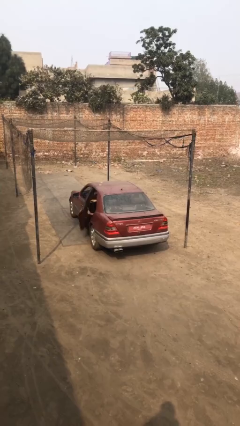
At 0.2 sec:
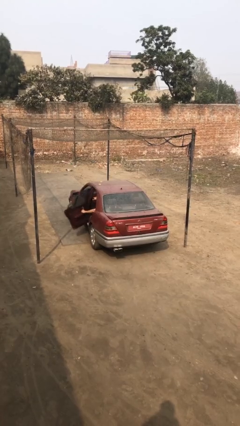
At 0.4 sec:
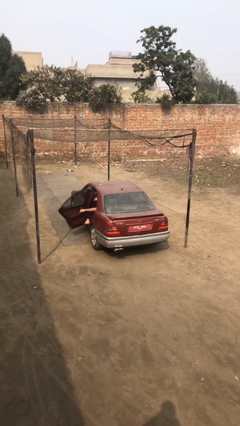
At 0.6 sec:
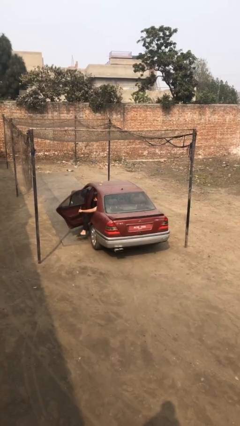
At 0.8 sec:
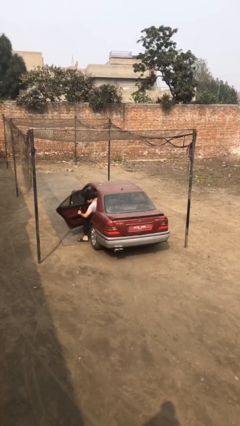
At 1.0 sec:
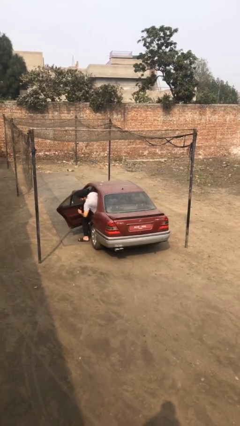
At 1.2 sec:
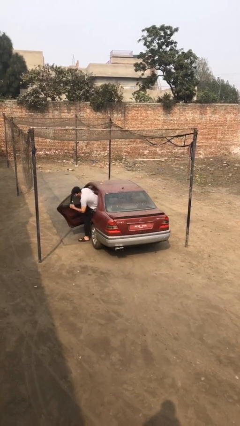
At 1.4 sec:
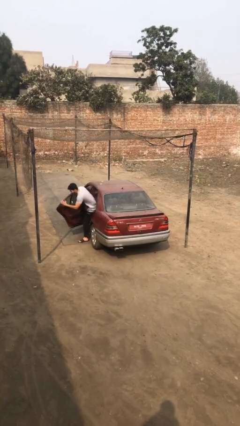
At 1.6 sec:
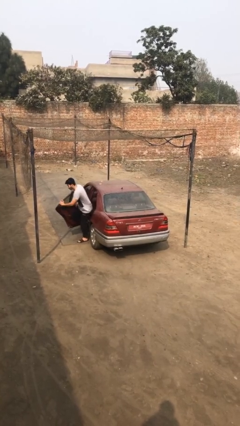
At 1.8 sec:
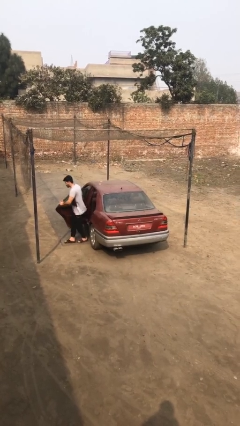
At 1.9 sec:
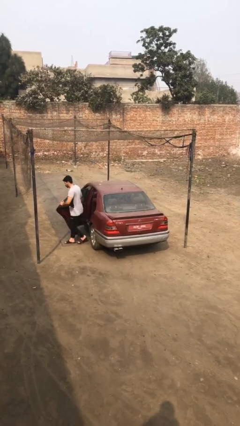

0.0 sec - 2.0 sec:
car drops off person

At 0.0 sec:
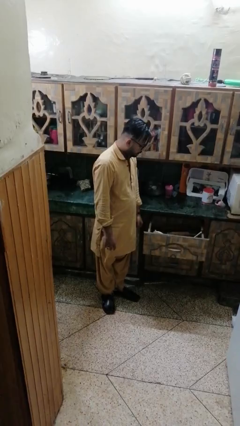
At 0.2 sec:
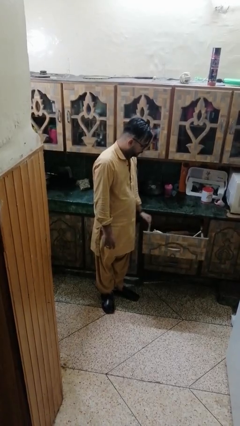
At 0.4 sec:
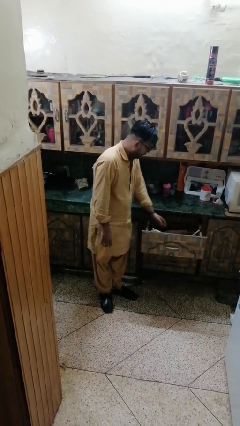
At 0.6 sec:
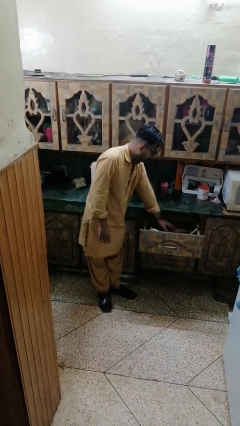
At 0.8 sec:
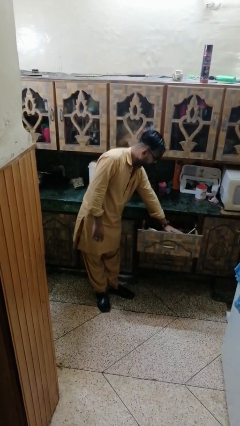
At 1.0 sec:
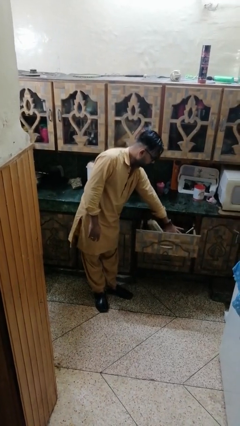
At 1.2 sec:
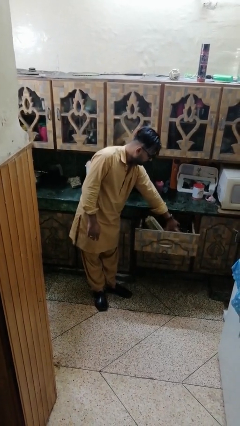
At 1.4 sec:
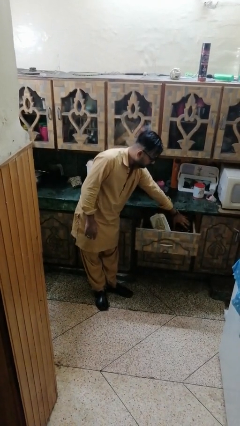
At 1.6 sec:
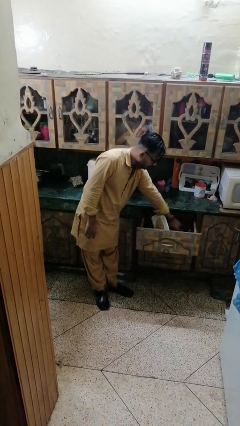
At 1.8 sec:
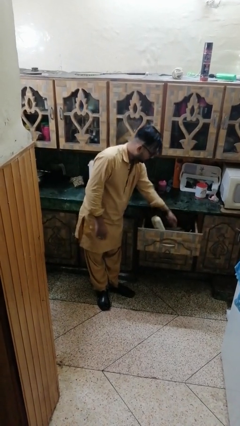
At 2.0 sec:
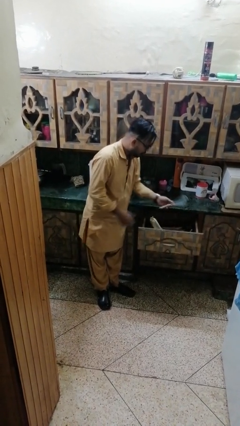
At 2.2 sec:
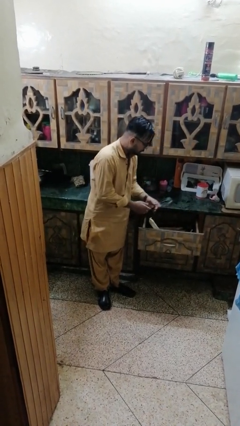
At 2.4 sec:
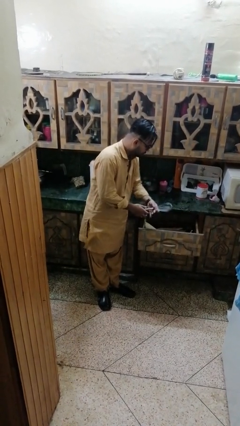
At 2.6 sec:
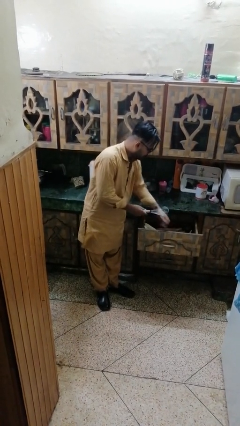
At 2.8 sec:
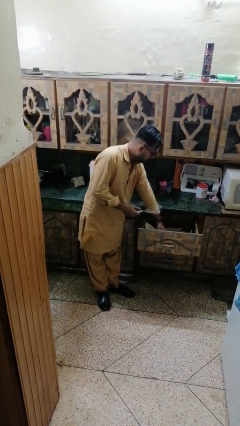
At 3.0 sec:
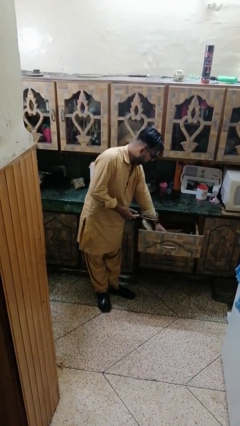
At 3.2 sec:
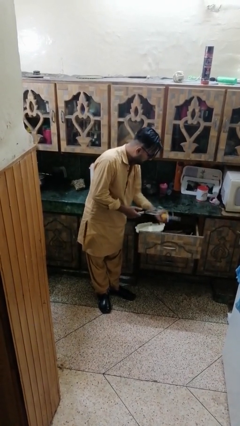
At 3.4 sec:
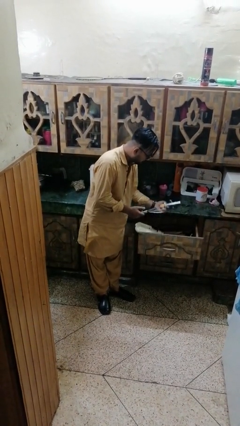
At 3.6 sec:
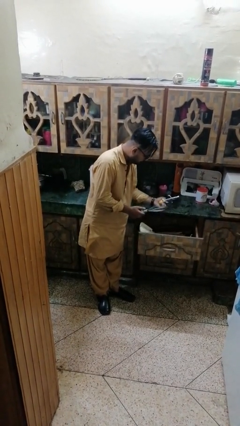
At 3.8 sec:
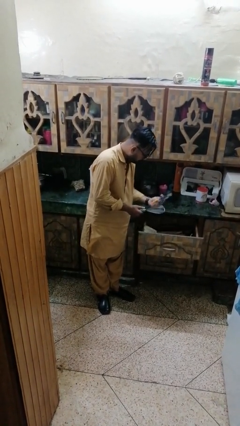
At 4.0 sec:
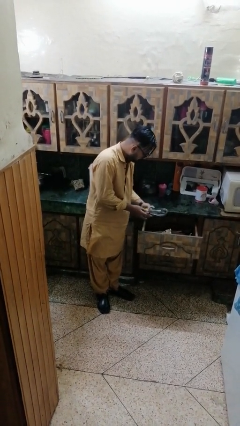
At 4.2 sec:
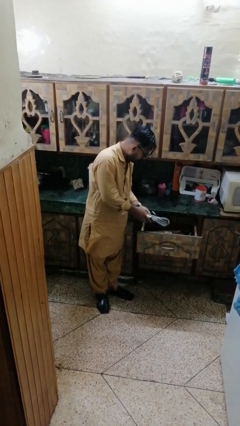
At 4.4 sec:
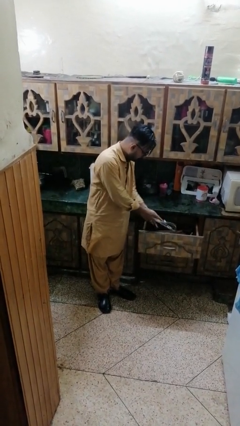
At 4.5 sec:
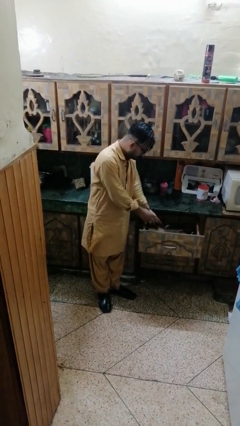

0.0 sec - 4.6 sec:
person searches in kitchen drawer

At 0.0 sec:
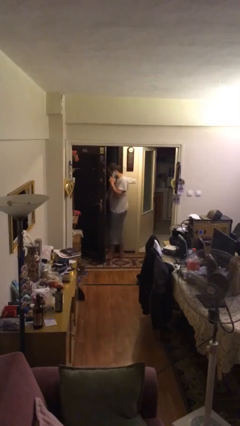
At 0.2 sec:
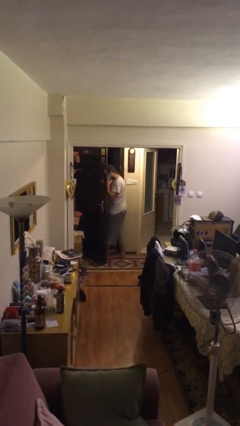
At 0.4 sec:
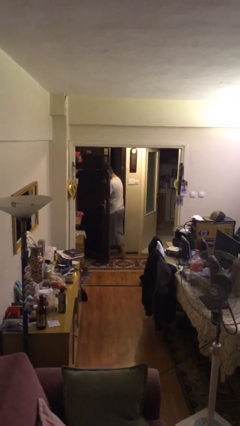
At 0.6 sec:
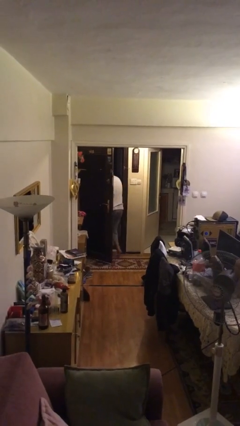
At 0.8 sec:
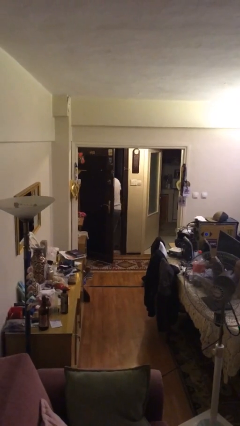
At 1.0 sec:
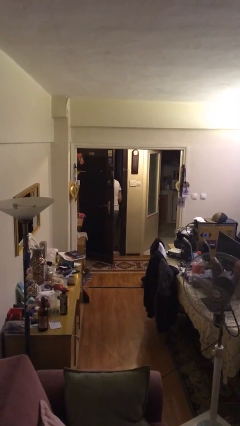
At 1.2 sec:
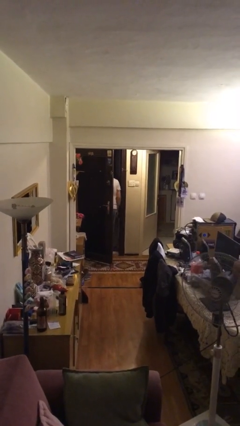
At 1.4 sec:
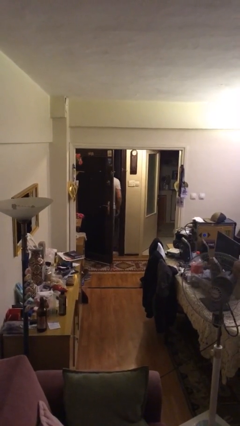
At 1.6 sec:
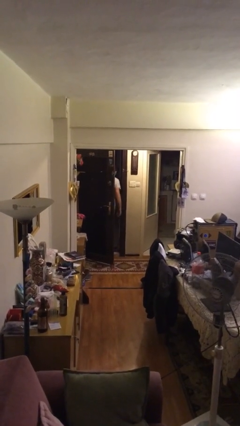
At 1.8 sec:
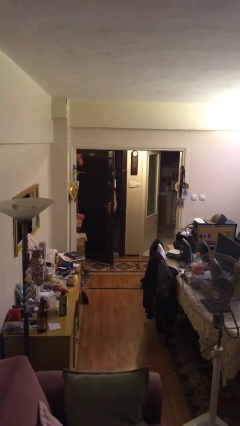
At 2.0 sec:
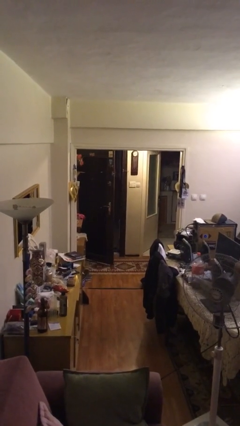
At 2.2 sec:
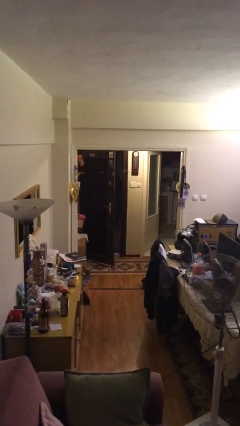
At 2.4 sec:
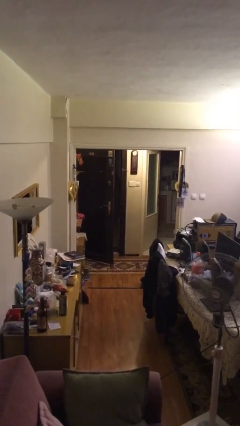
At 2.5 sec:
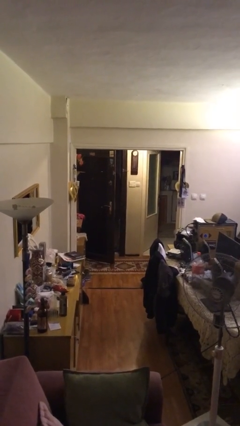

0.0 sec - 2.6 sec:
person exits scene through structure

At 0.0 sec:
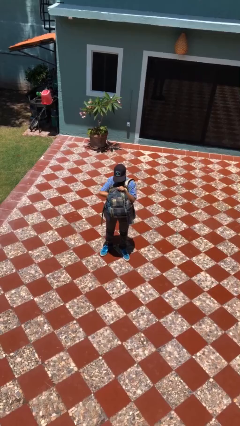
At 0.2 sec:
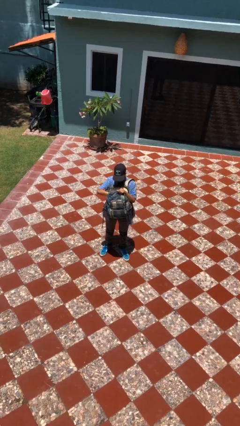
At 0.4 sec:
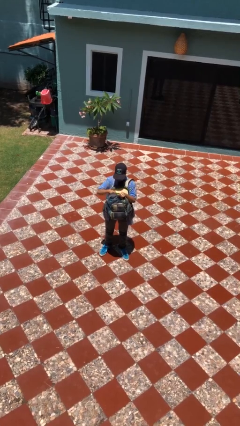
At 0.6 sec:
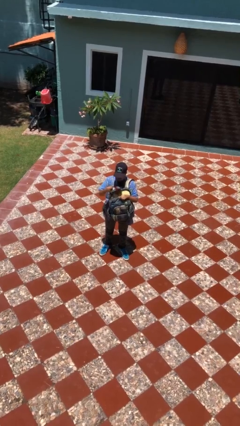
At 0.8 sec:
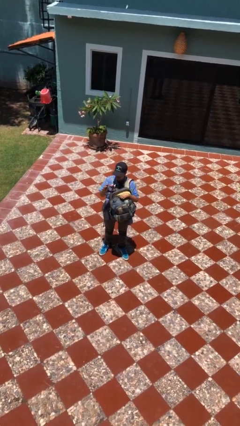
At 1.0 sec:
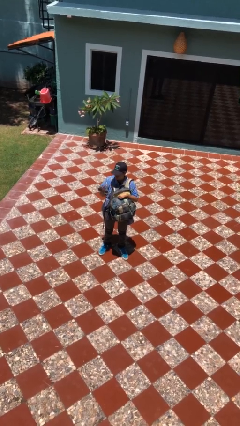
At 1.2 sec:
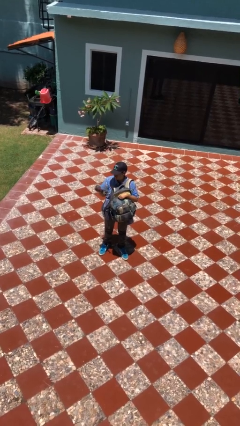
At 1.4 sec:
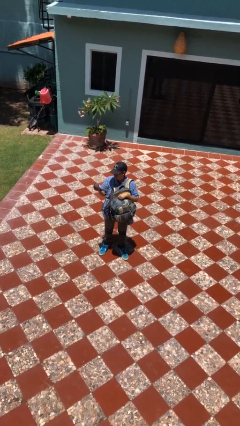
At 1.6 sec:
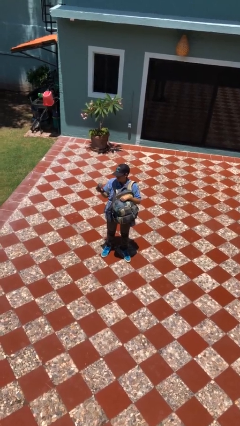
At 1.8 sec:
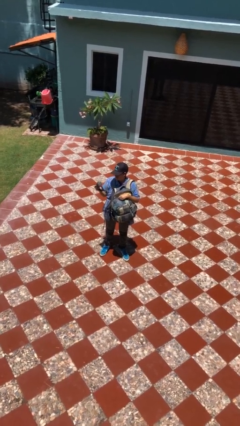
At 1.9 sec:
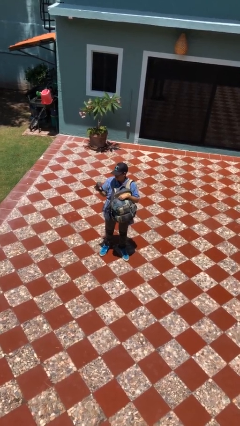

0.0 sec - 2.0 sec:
person takes object from backpack

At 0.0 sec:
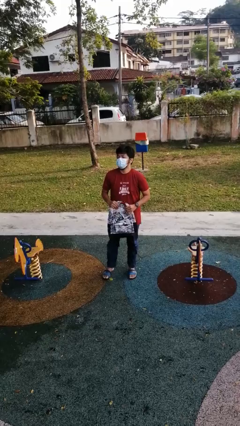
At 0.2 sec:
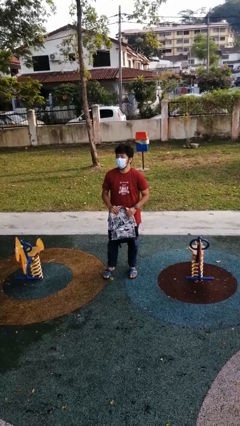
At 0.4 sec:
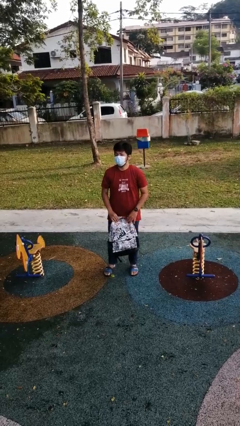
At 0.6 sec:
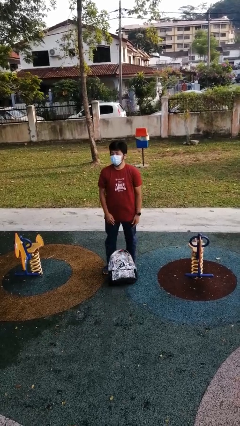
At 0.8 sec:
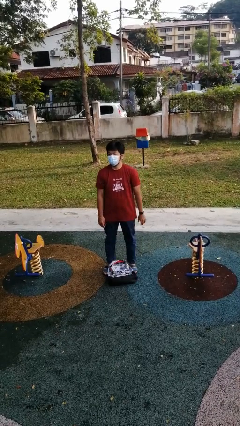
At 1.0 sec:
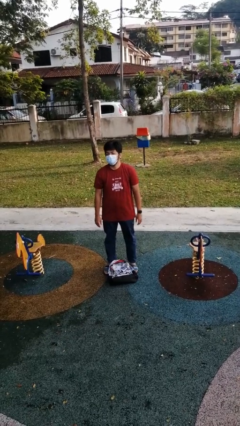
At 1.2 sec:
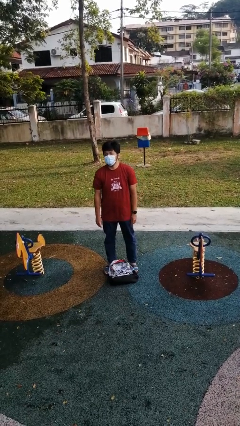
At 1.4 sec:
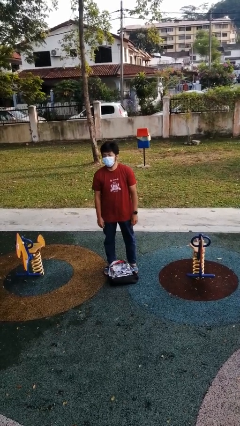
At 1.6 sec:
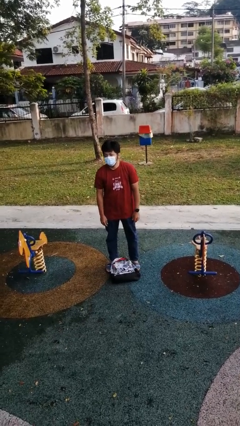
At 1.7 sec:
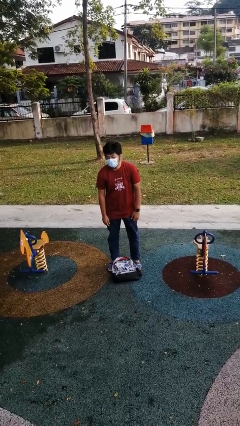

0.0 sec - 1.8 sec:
person drops object

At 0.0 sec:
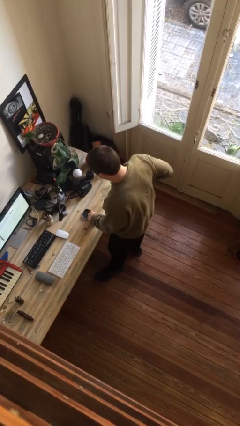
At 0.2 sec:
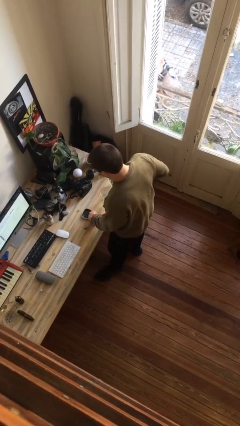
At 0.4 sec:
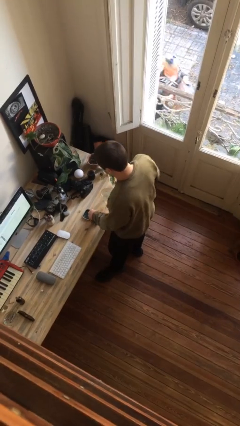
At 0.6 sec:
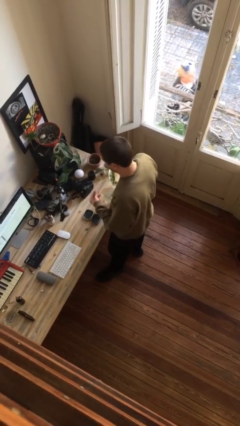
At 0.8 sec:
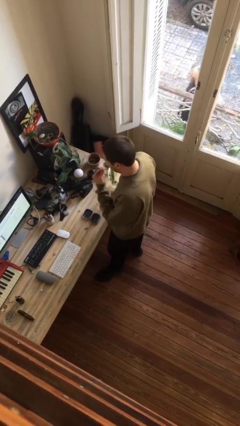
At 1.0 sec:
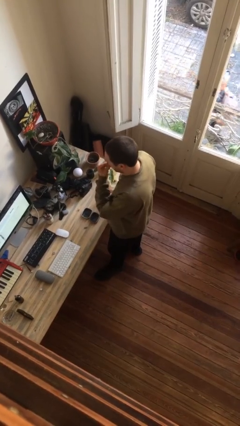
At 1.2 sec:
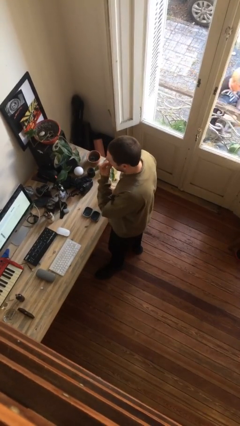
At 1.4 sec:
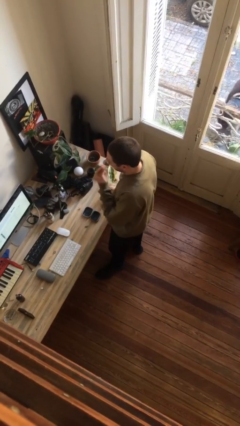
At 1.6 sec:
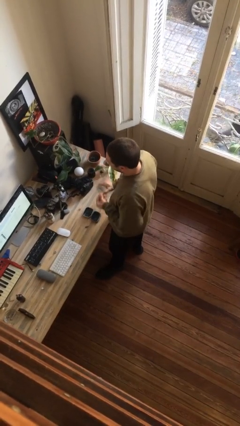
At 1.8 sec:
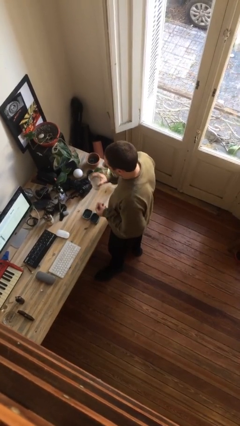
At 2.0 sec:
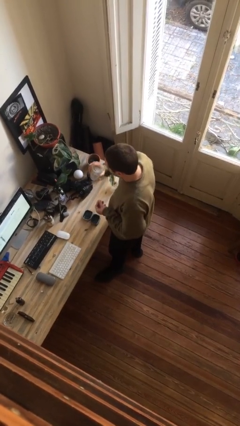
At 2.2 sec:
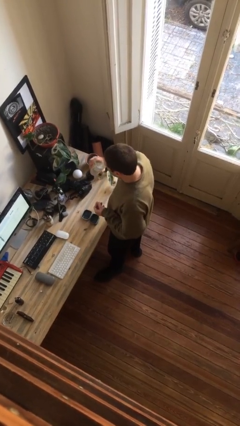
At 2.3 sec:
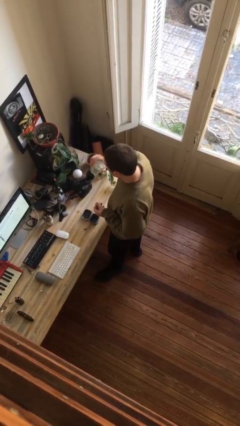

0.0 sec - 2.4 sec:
person takes medicine pills

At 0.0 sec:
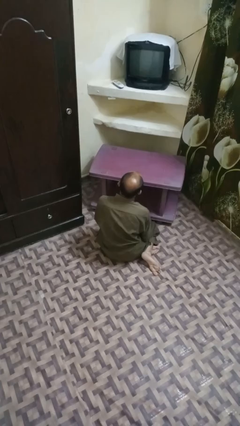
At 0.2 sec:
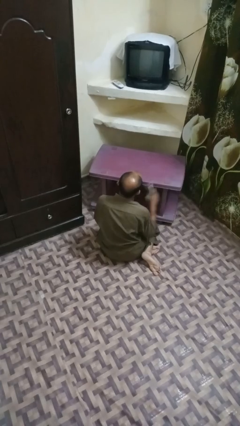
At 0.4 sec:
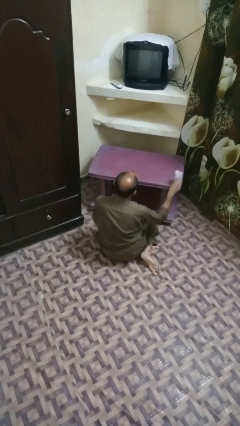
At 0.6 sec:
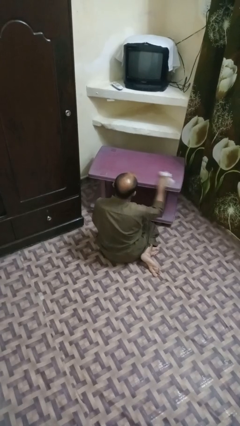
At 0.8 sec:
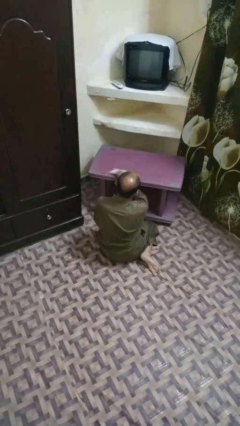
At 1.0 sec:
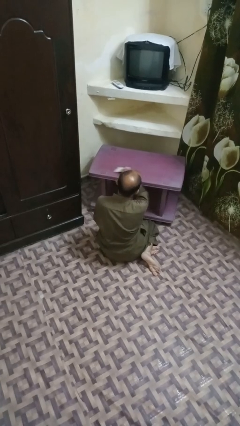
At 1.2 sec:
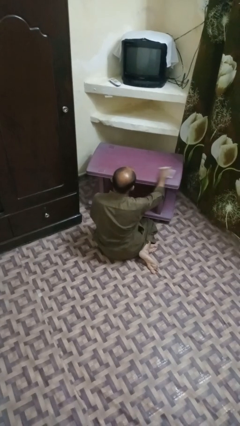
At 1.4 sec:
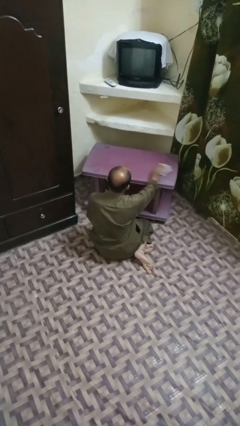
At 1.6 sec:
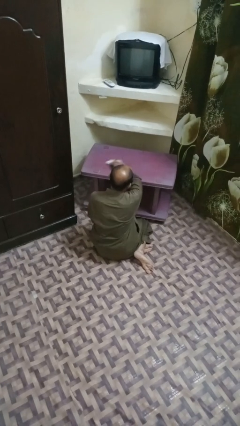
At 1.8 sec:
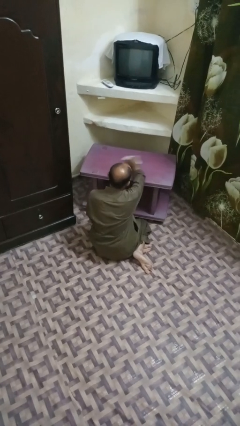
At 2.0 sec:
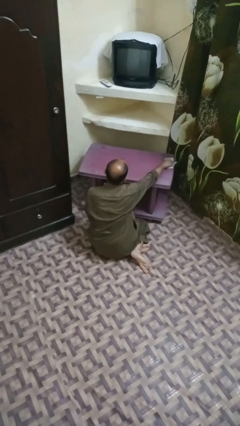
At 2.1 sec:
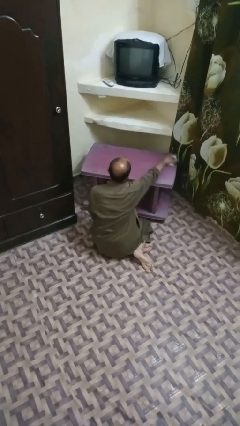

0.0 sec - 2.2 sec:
person cleans table with rag
